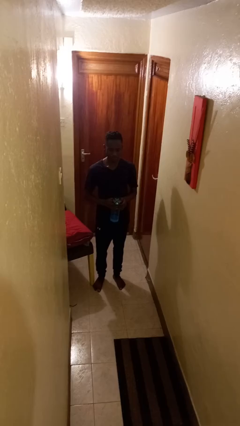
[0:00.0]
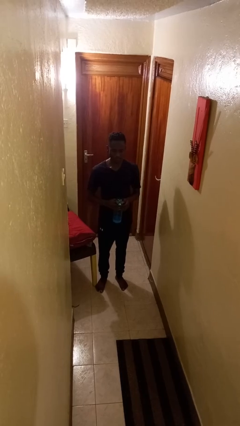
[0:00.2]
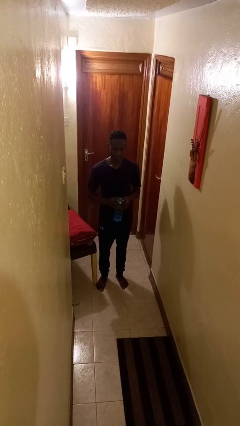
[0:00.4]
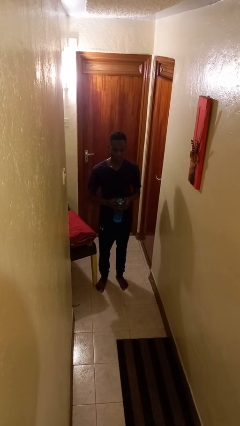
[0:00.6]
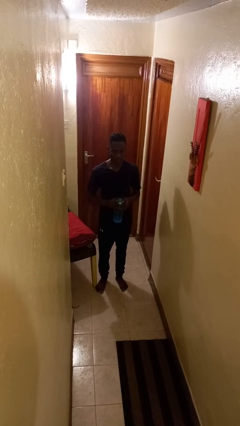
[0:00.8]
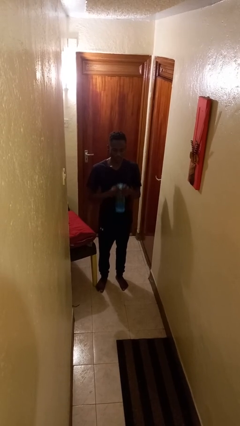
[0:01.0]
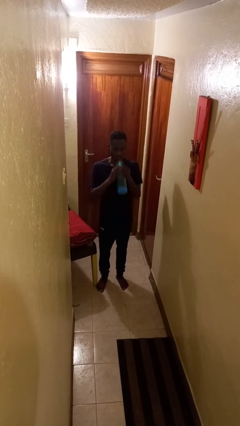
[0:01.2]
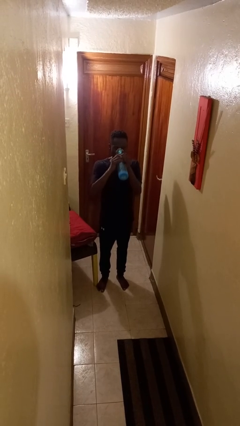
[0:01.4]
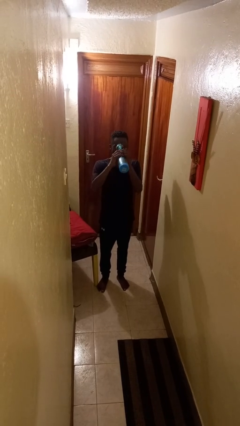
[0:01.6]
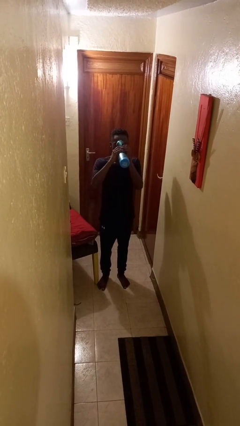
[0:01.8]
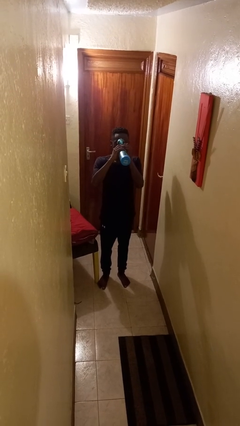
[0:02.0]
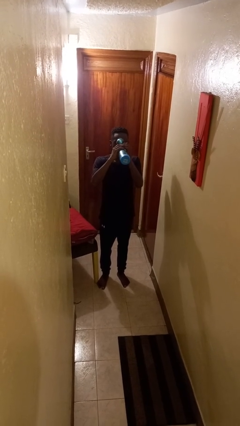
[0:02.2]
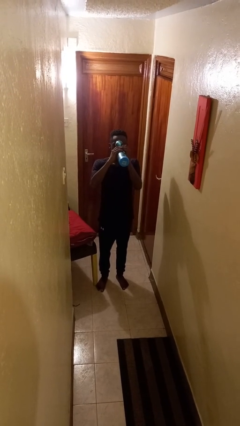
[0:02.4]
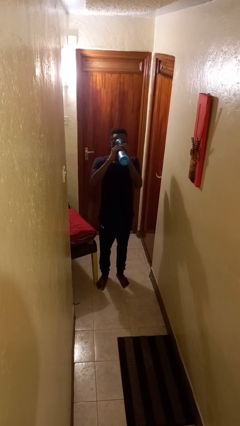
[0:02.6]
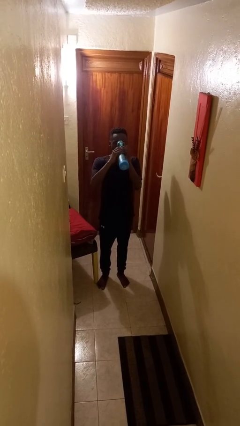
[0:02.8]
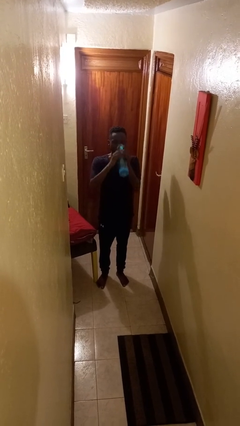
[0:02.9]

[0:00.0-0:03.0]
person drinks from bottle

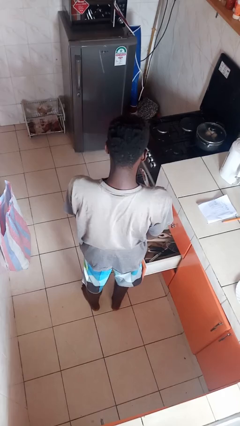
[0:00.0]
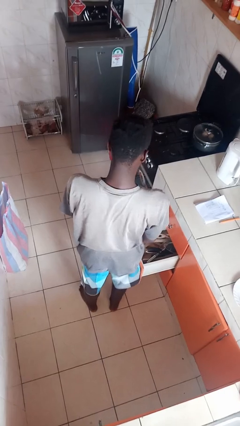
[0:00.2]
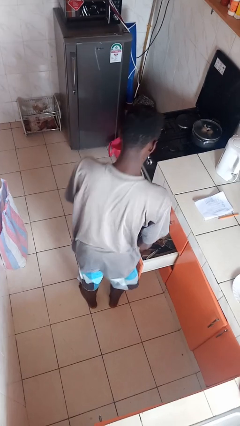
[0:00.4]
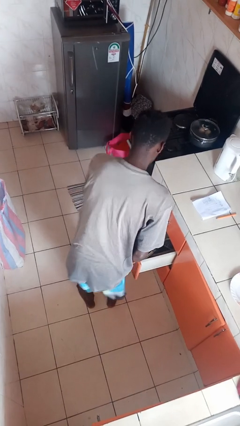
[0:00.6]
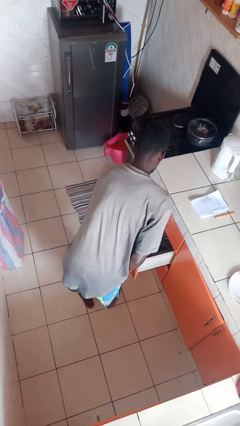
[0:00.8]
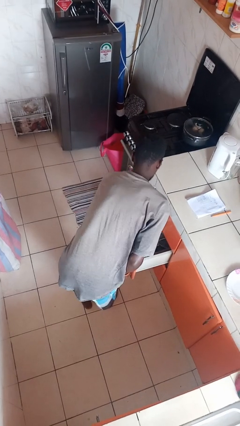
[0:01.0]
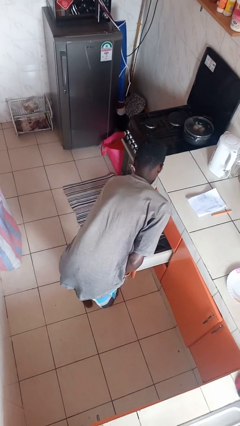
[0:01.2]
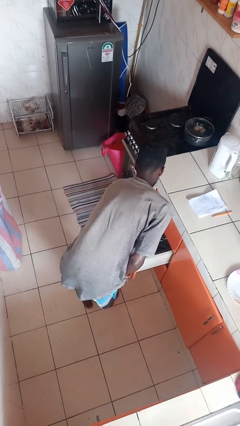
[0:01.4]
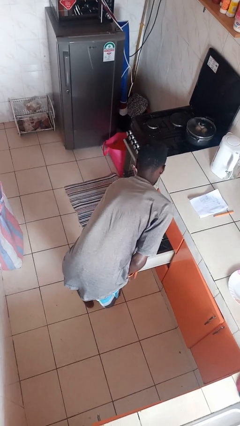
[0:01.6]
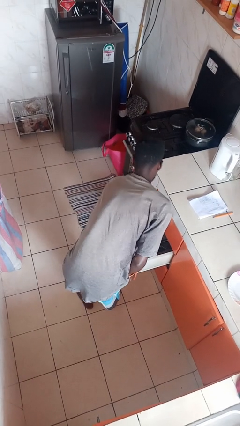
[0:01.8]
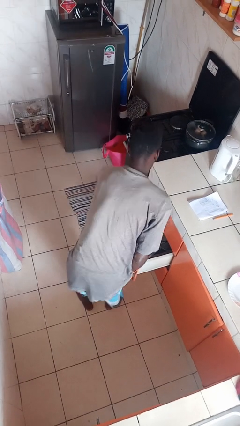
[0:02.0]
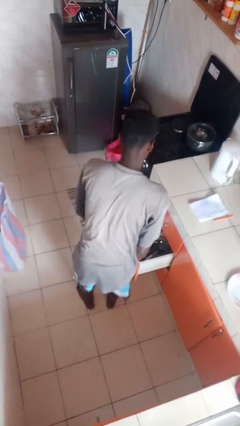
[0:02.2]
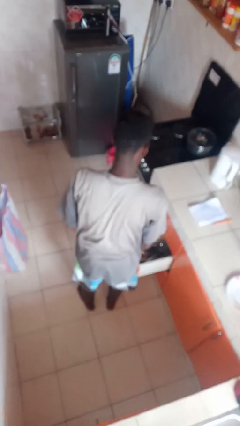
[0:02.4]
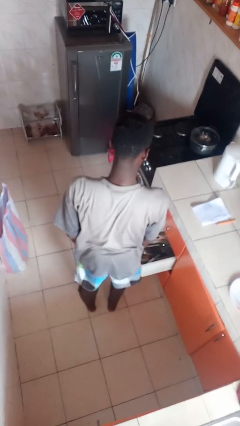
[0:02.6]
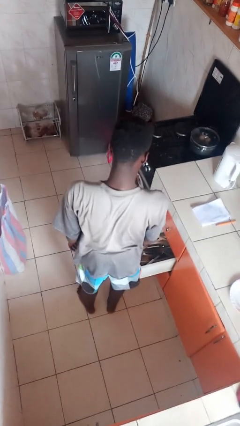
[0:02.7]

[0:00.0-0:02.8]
person puts object into kitchen drawer

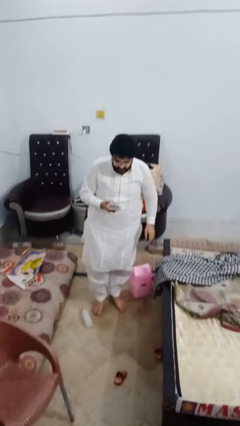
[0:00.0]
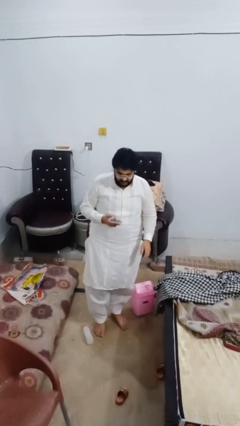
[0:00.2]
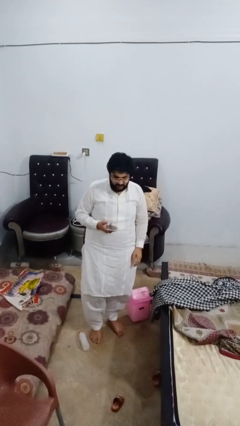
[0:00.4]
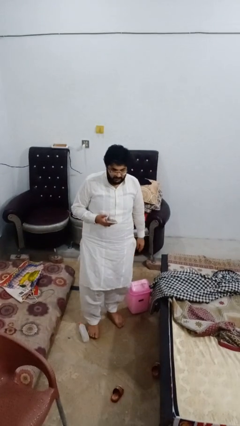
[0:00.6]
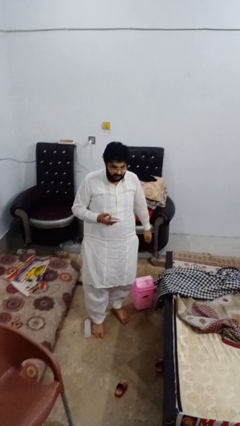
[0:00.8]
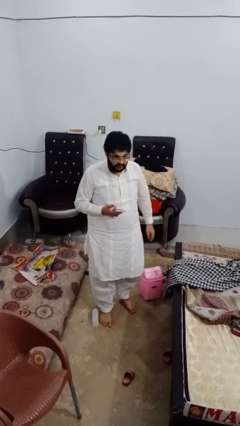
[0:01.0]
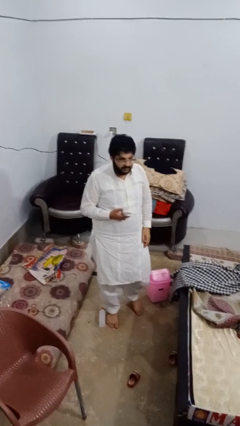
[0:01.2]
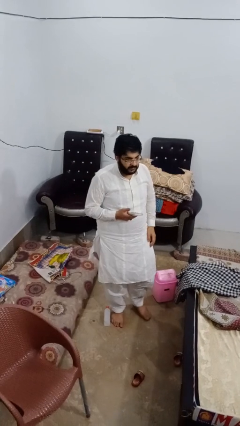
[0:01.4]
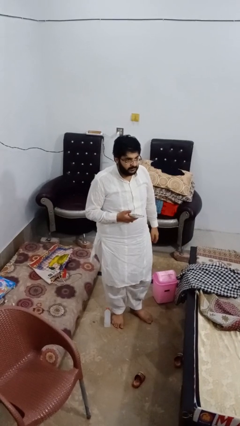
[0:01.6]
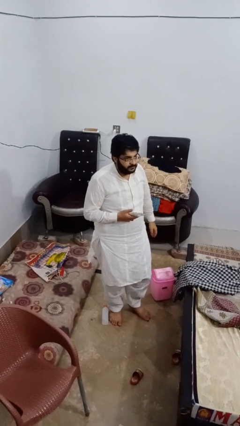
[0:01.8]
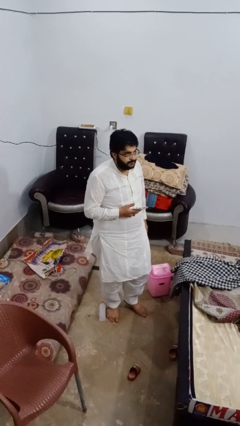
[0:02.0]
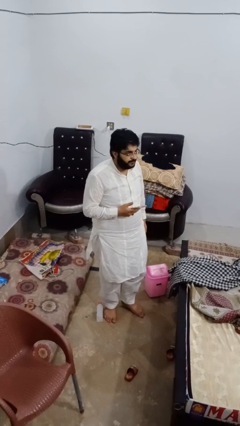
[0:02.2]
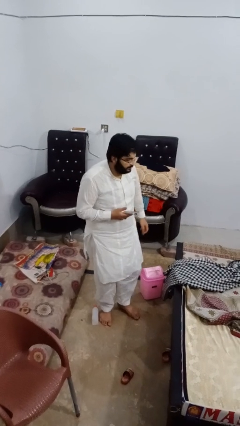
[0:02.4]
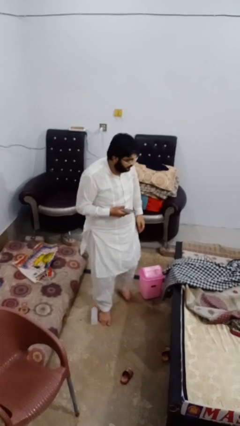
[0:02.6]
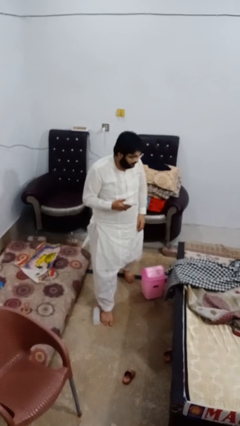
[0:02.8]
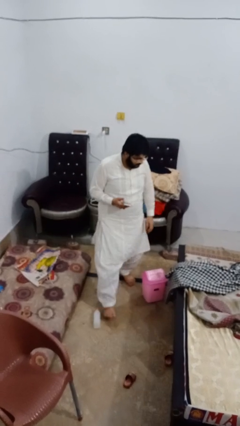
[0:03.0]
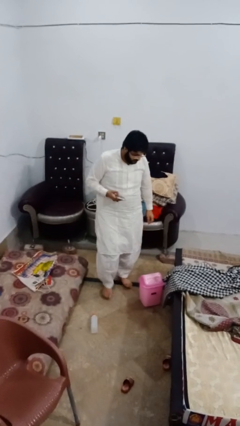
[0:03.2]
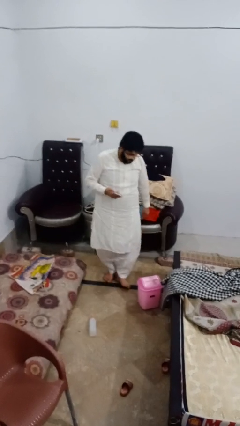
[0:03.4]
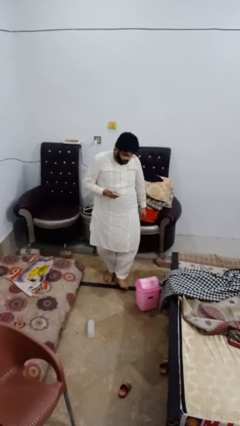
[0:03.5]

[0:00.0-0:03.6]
person stands up from floor

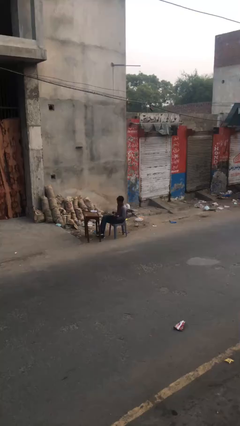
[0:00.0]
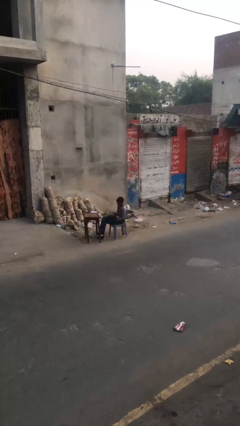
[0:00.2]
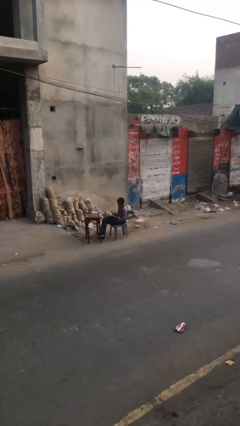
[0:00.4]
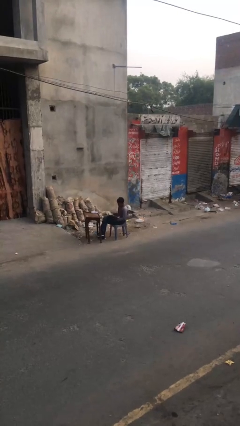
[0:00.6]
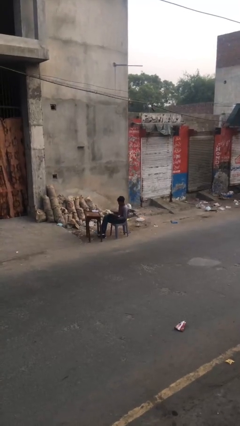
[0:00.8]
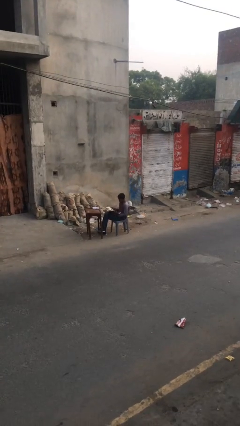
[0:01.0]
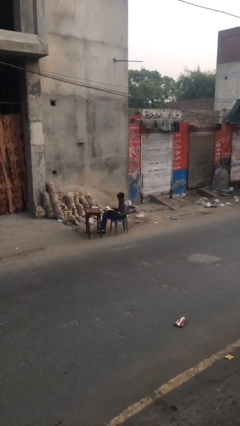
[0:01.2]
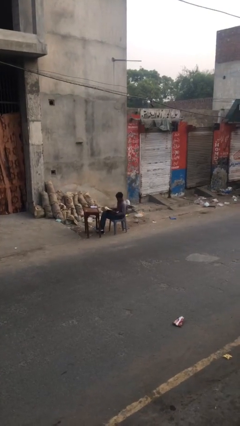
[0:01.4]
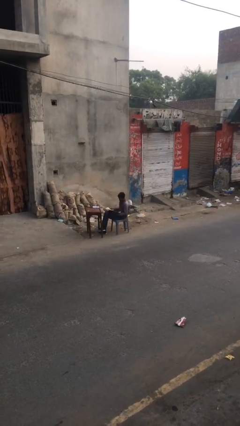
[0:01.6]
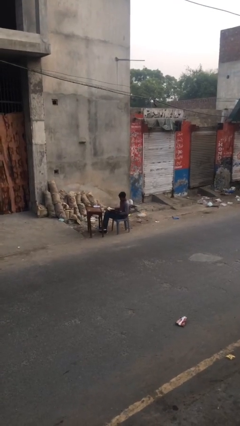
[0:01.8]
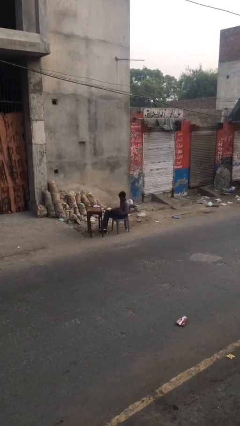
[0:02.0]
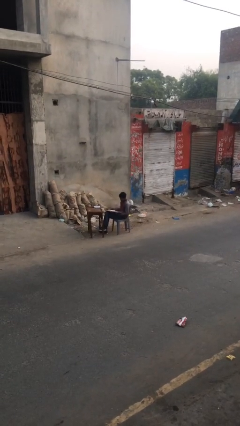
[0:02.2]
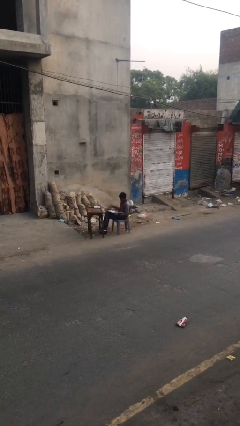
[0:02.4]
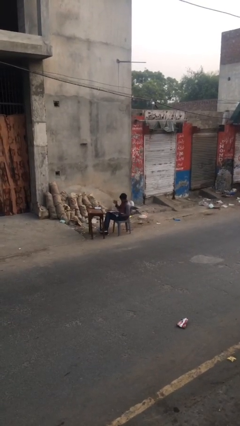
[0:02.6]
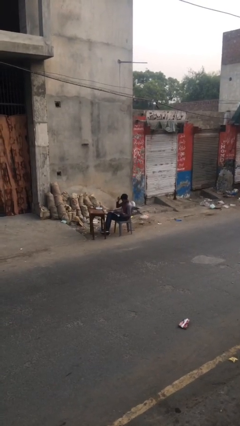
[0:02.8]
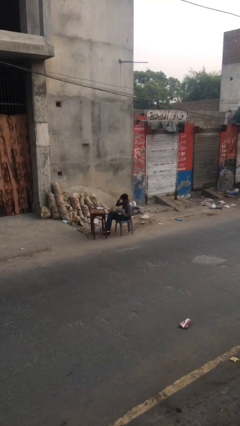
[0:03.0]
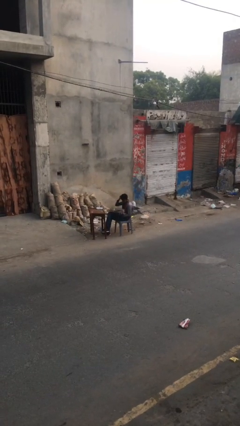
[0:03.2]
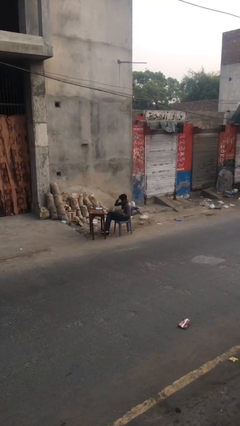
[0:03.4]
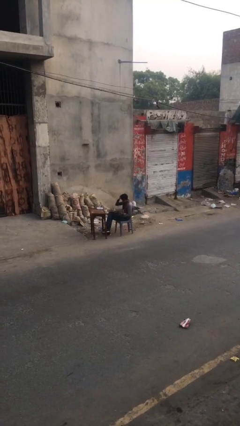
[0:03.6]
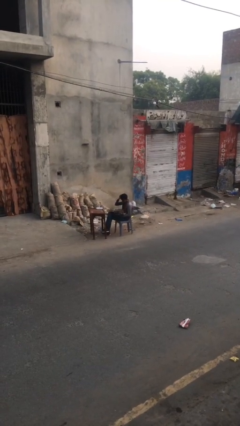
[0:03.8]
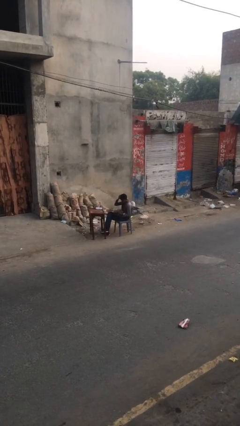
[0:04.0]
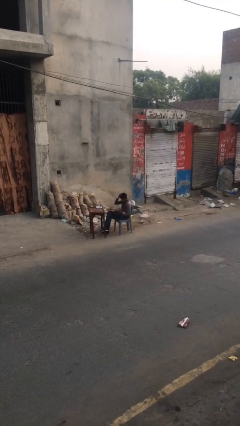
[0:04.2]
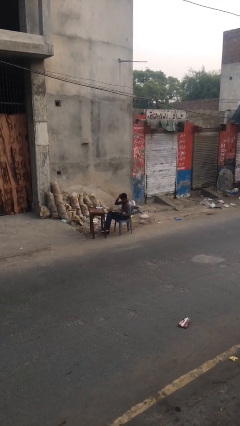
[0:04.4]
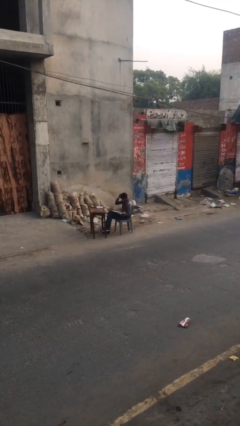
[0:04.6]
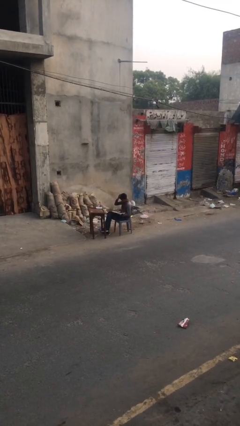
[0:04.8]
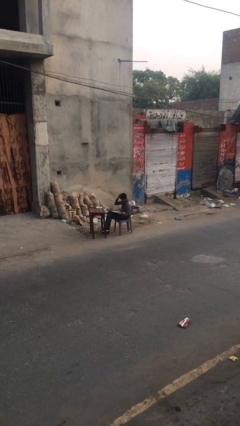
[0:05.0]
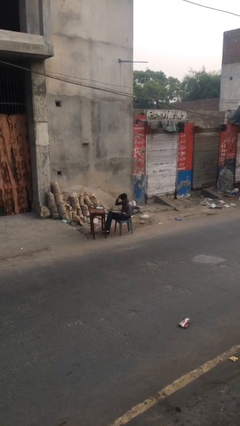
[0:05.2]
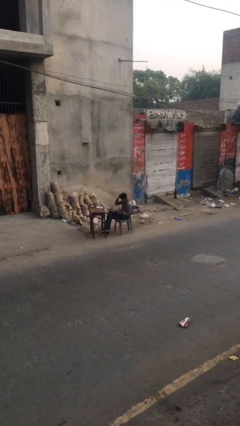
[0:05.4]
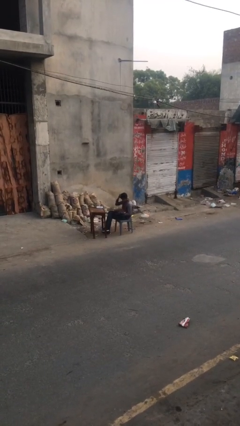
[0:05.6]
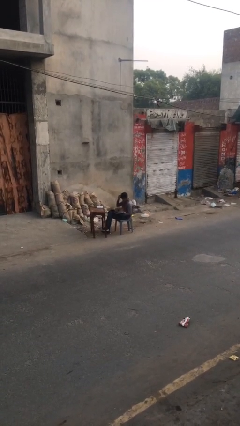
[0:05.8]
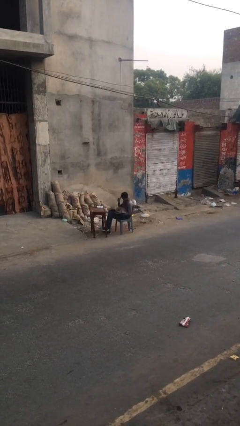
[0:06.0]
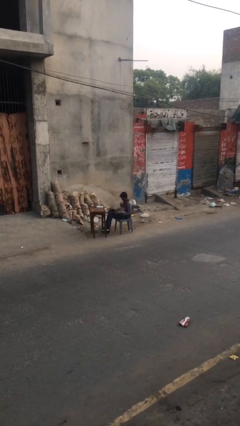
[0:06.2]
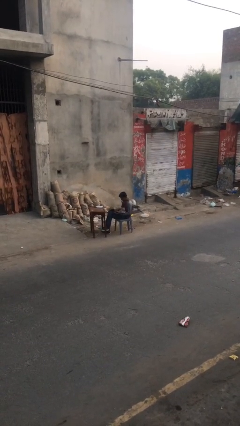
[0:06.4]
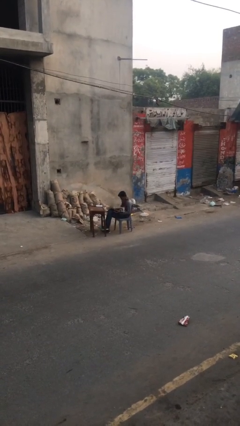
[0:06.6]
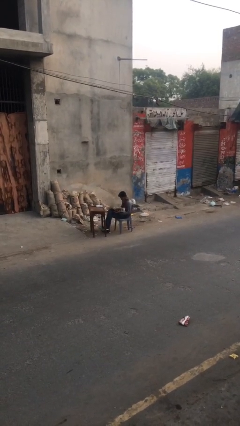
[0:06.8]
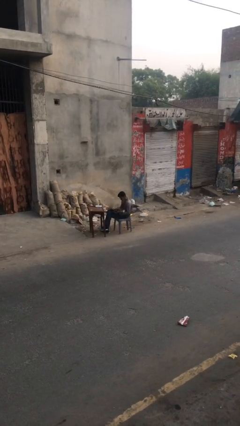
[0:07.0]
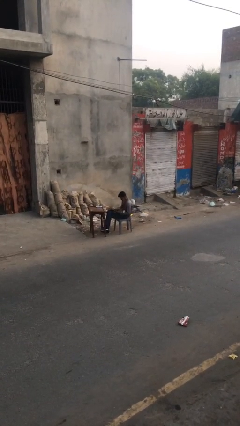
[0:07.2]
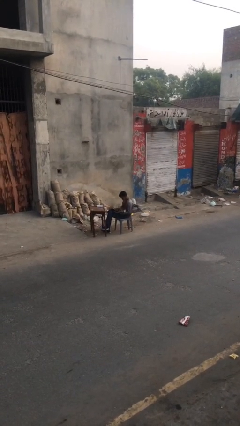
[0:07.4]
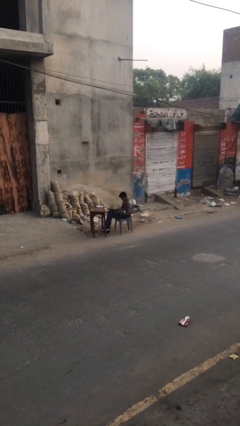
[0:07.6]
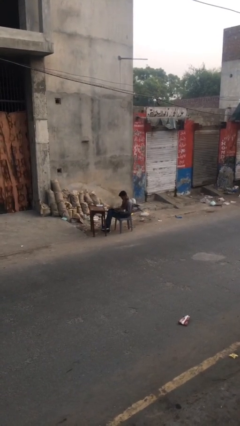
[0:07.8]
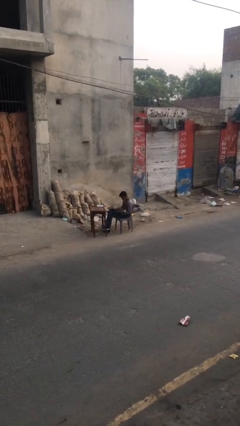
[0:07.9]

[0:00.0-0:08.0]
person reads document

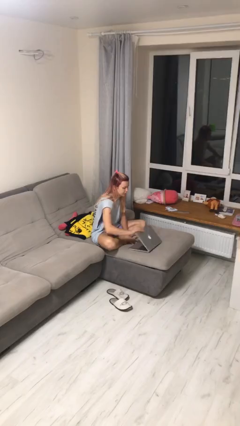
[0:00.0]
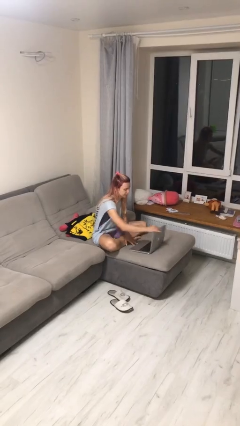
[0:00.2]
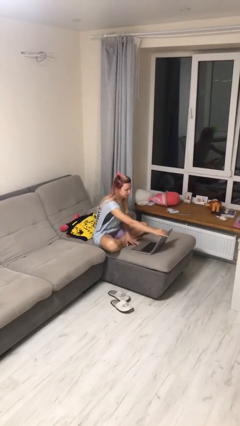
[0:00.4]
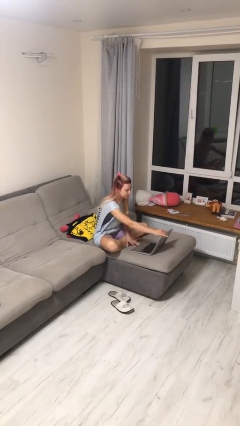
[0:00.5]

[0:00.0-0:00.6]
person opens laptop
